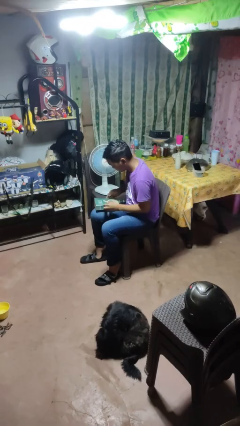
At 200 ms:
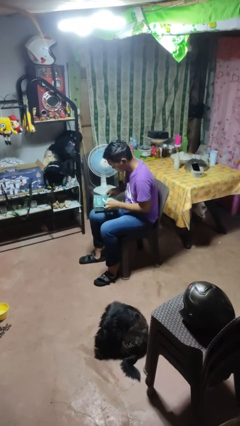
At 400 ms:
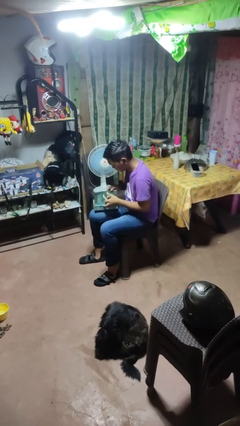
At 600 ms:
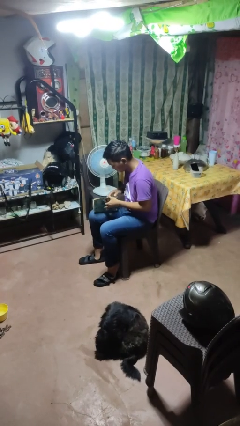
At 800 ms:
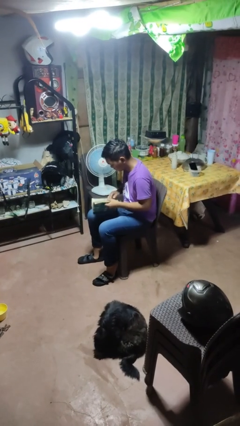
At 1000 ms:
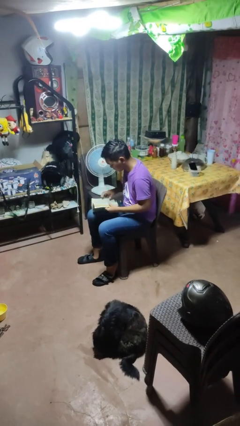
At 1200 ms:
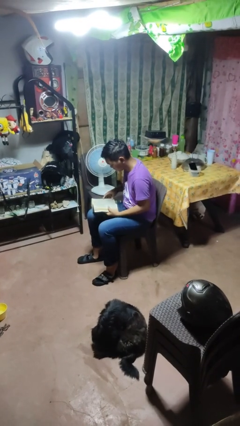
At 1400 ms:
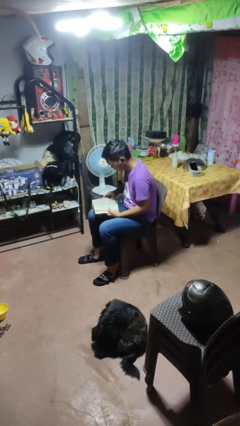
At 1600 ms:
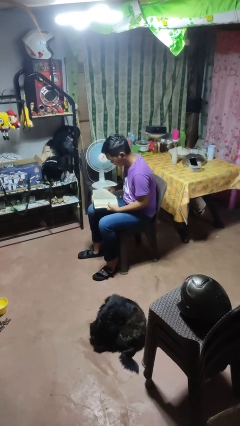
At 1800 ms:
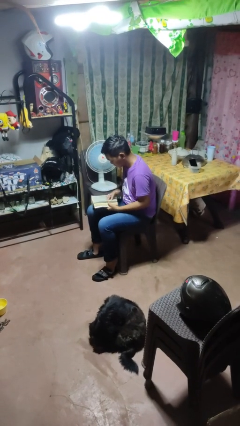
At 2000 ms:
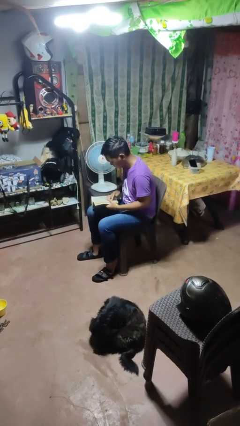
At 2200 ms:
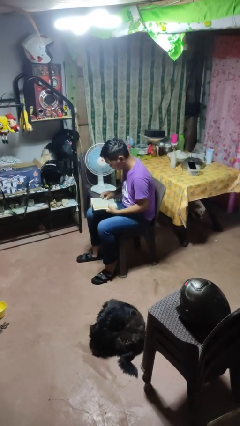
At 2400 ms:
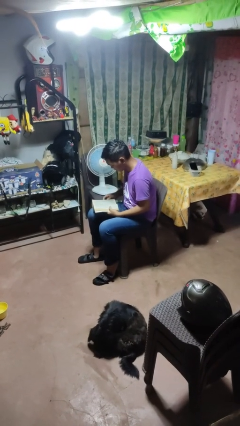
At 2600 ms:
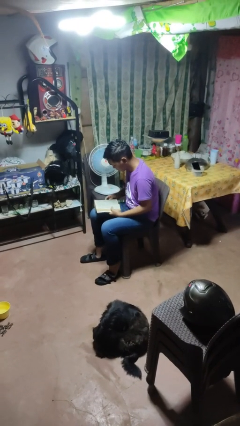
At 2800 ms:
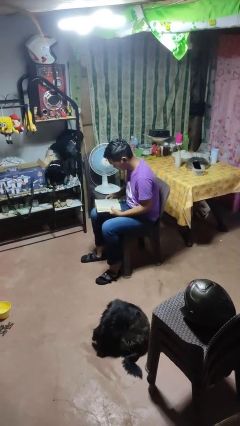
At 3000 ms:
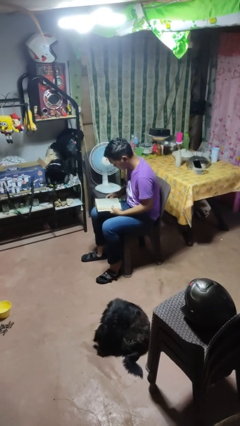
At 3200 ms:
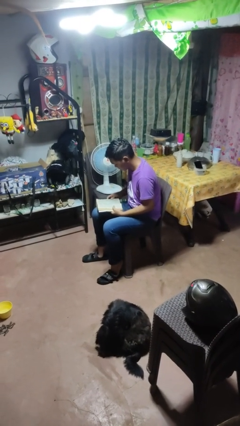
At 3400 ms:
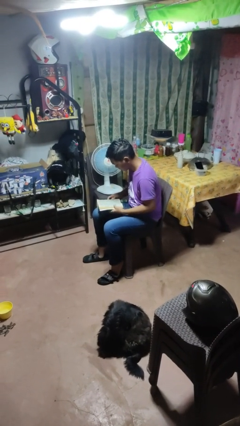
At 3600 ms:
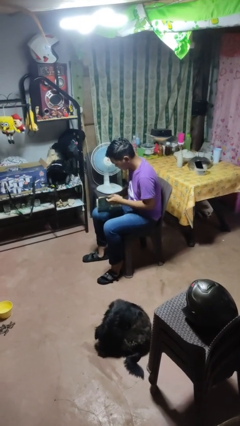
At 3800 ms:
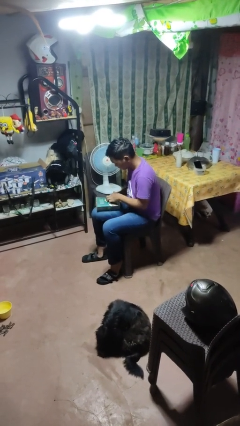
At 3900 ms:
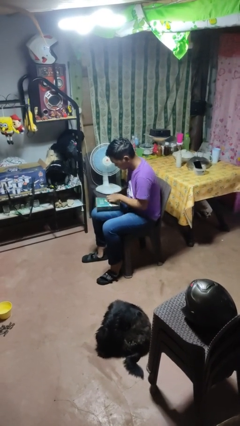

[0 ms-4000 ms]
person reads book

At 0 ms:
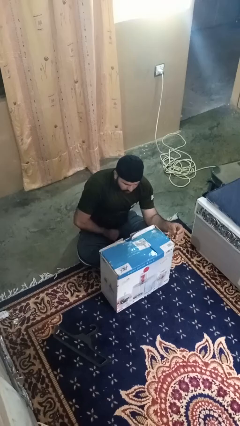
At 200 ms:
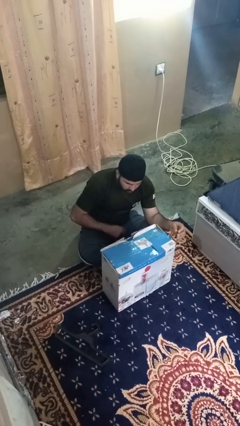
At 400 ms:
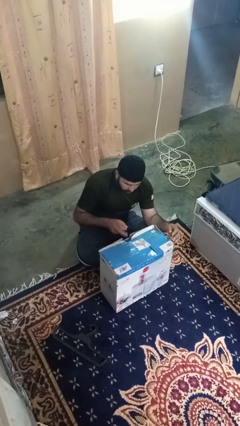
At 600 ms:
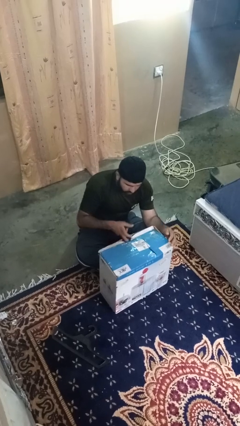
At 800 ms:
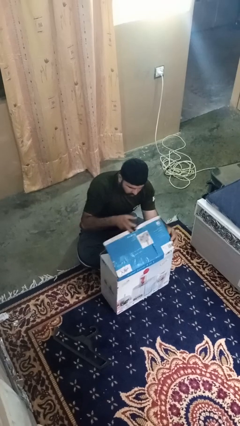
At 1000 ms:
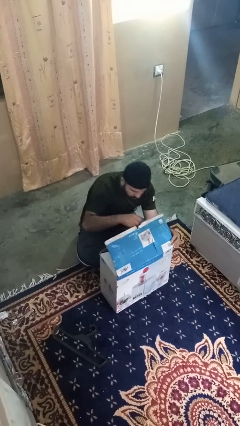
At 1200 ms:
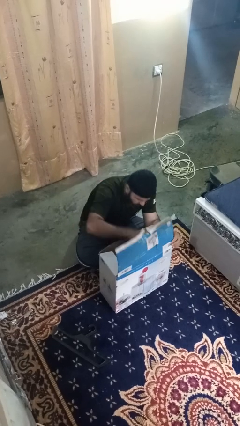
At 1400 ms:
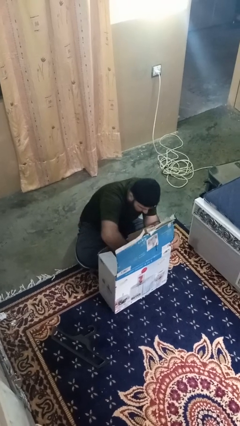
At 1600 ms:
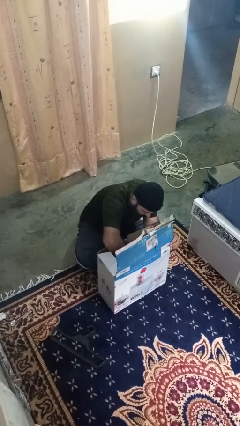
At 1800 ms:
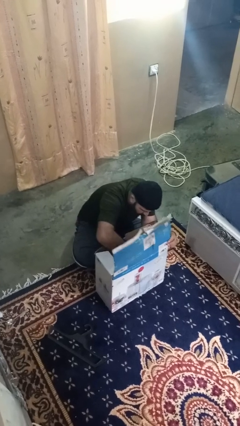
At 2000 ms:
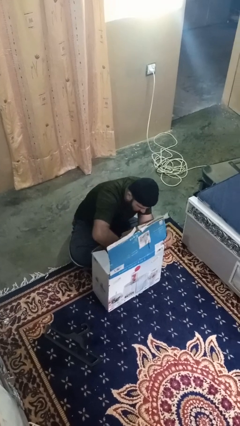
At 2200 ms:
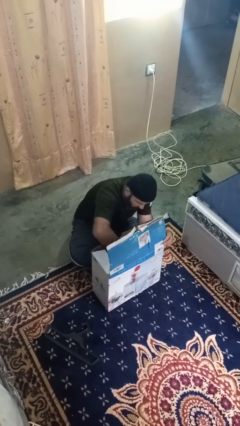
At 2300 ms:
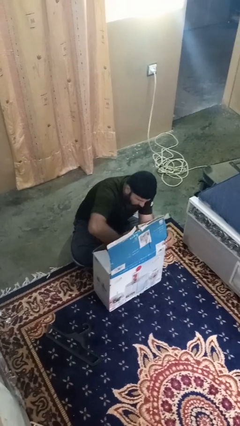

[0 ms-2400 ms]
person searches in box

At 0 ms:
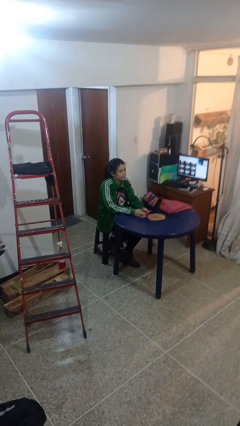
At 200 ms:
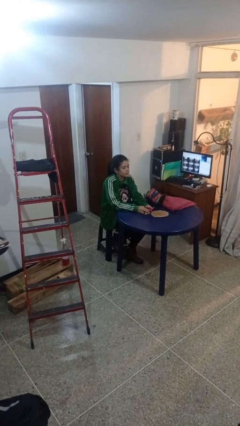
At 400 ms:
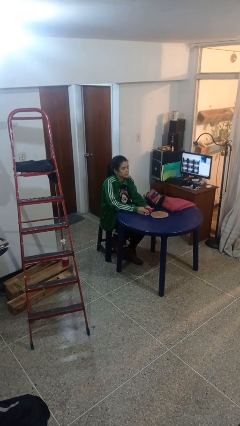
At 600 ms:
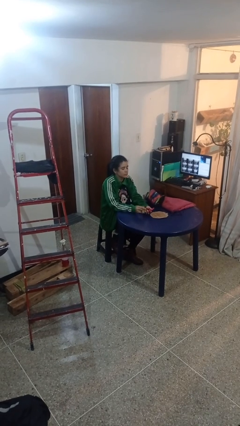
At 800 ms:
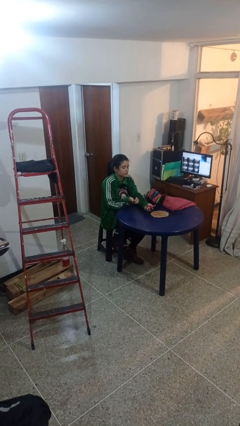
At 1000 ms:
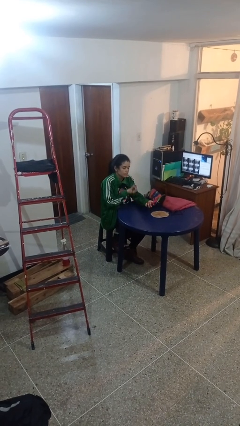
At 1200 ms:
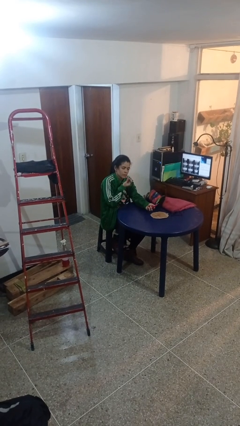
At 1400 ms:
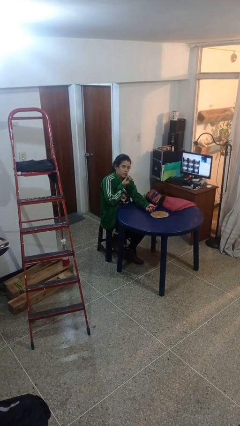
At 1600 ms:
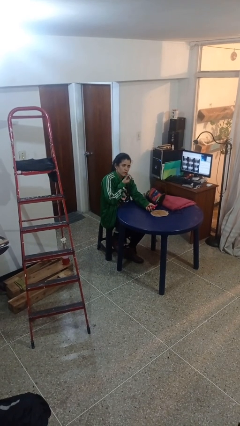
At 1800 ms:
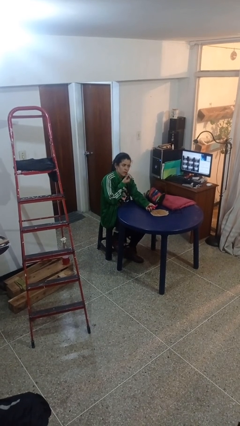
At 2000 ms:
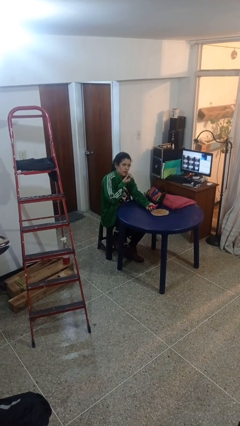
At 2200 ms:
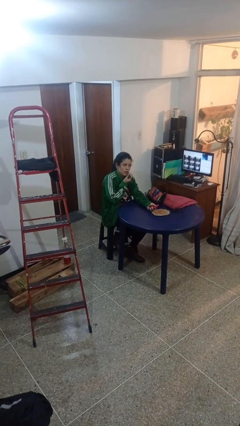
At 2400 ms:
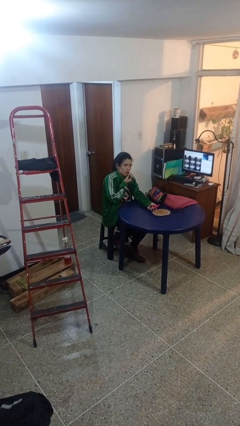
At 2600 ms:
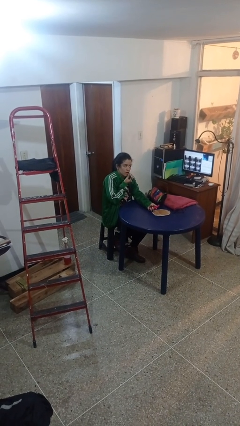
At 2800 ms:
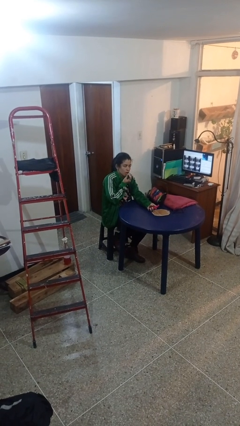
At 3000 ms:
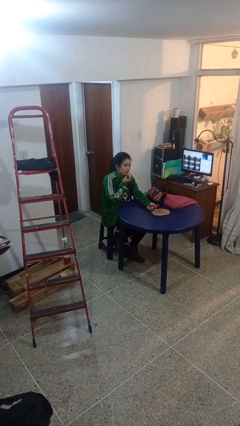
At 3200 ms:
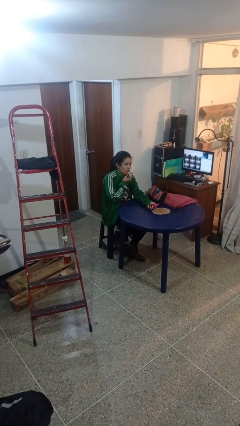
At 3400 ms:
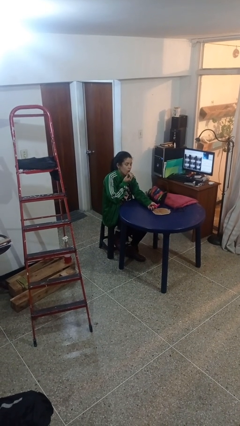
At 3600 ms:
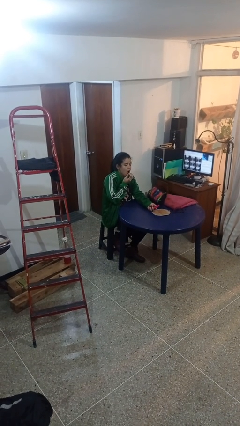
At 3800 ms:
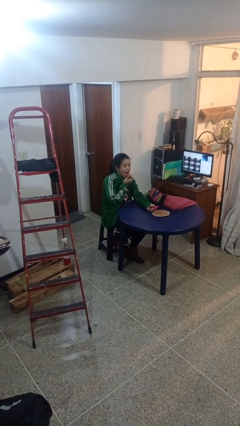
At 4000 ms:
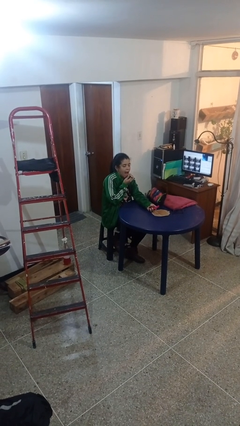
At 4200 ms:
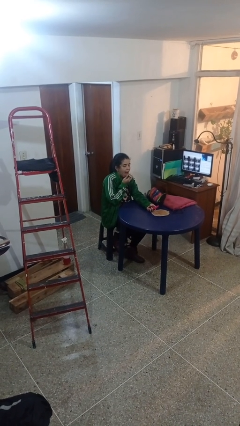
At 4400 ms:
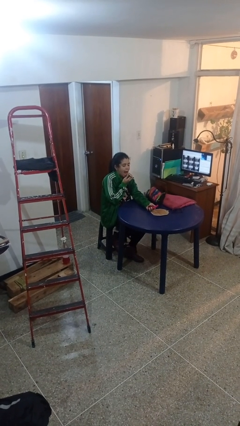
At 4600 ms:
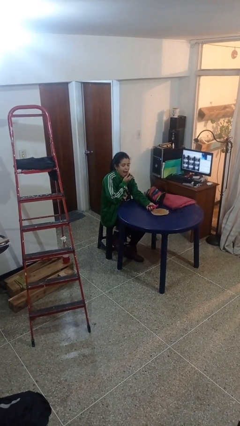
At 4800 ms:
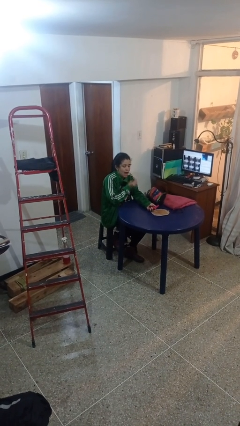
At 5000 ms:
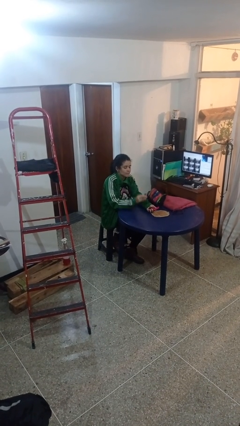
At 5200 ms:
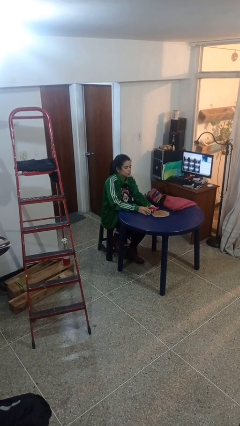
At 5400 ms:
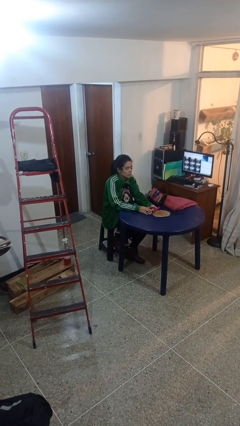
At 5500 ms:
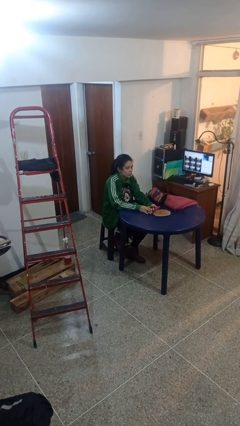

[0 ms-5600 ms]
person applies lip makeup

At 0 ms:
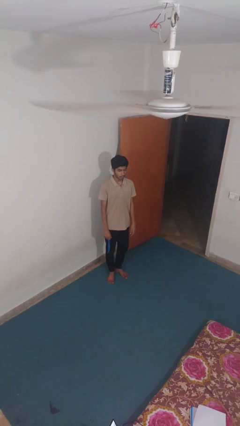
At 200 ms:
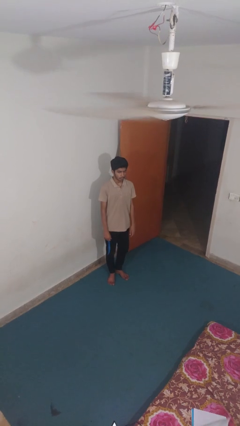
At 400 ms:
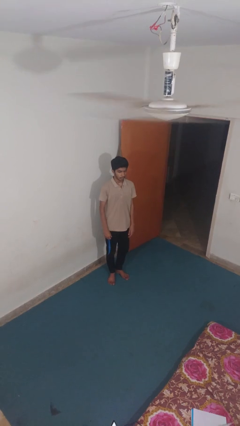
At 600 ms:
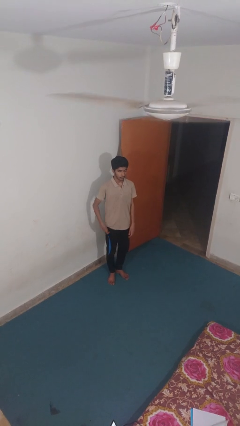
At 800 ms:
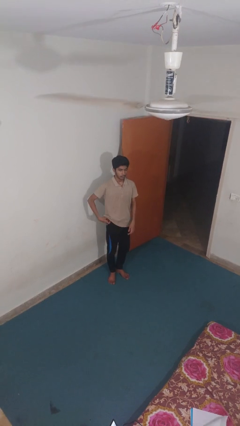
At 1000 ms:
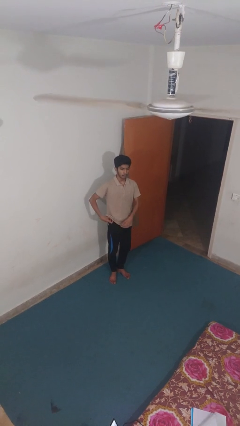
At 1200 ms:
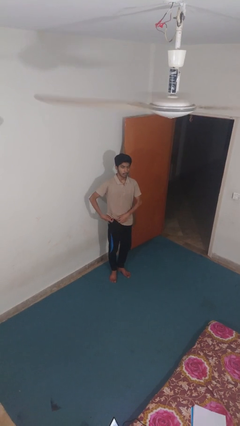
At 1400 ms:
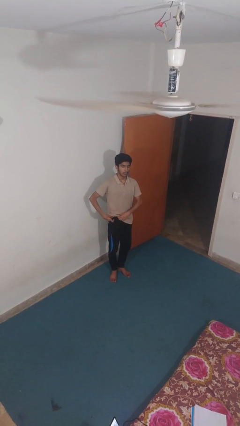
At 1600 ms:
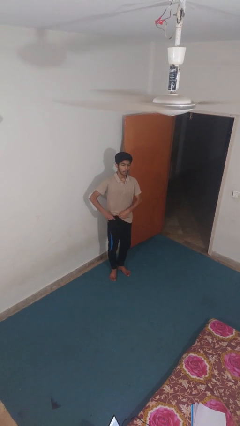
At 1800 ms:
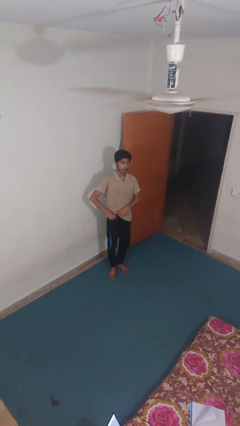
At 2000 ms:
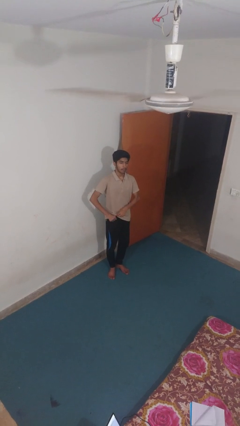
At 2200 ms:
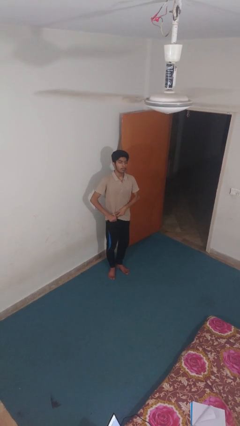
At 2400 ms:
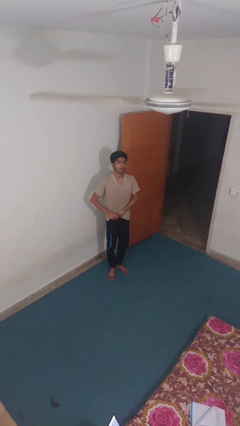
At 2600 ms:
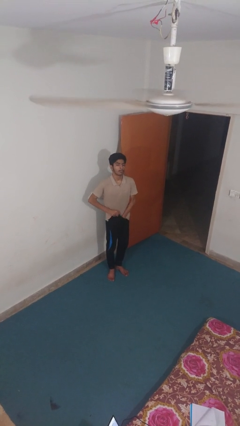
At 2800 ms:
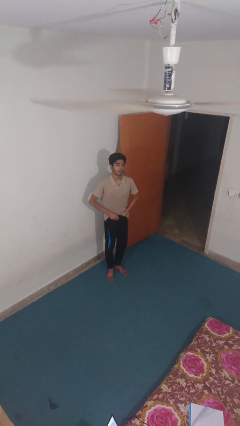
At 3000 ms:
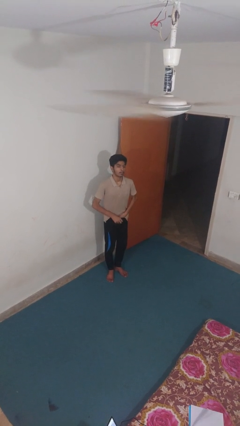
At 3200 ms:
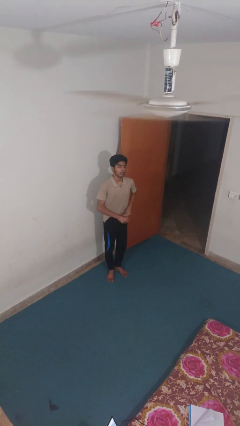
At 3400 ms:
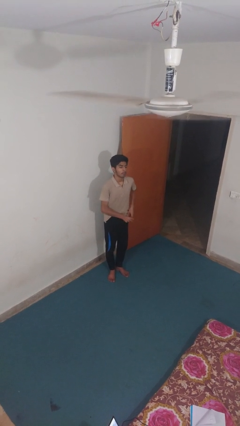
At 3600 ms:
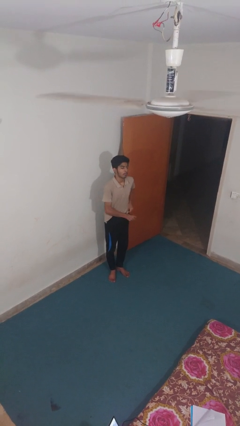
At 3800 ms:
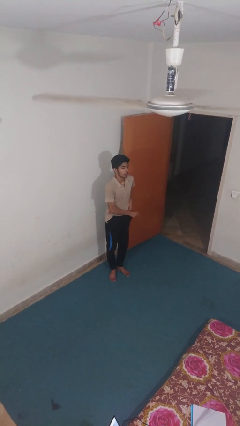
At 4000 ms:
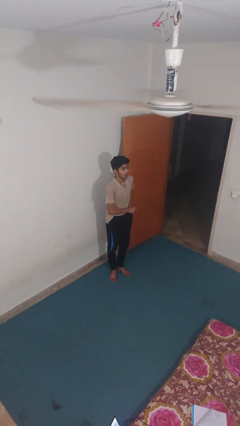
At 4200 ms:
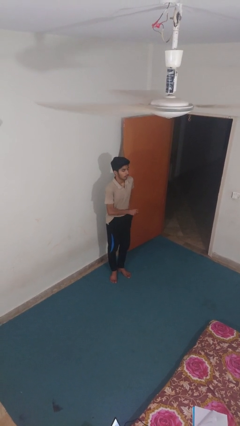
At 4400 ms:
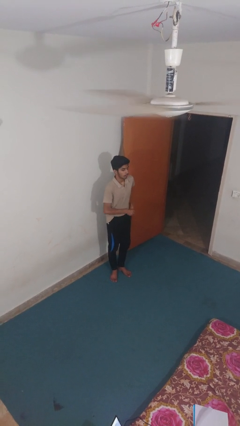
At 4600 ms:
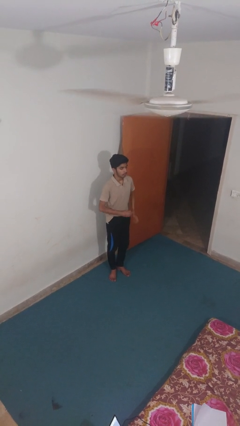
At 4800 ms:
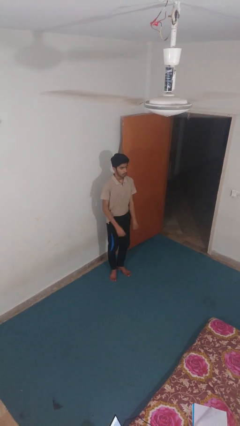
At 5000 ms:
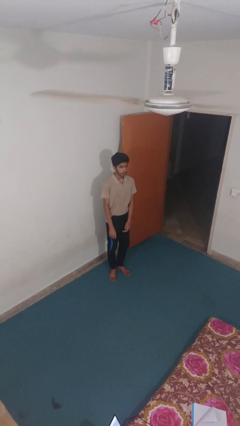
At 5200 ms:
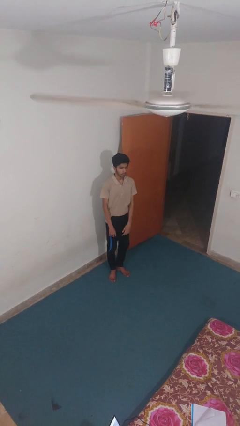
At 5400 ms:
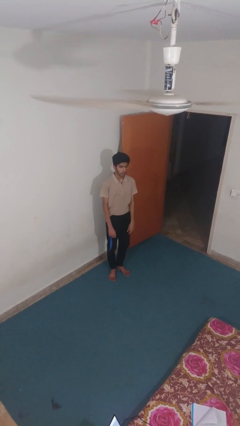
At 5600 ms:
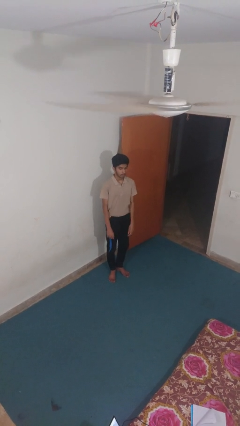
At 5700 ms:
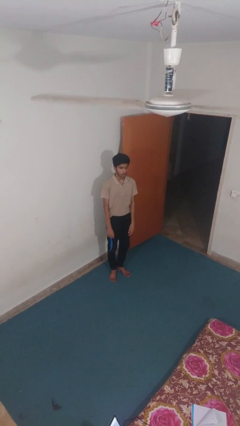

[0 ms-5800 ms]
person tucks in shirt
